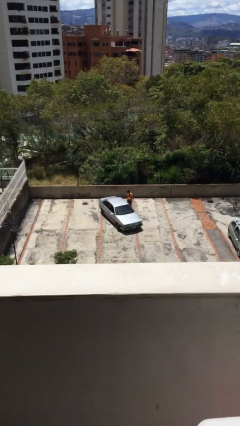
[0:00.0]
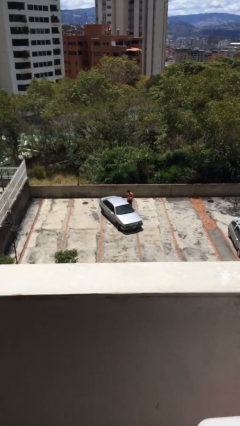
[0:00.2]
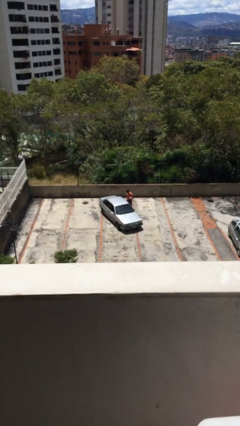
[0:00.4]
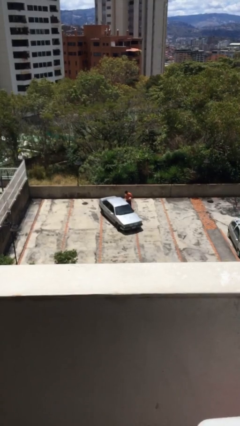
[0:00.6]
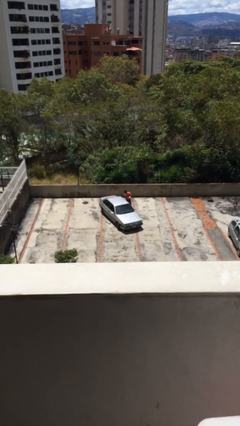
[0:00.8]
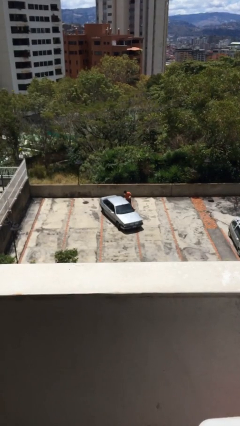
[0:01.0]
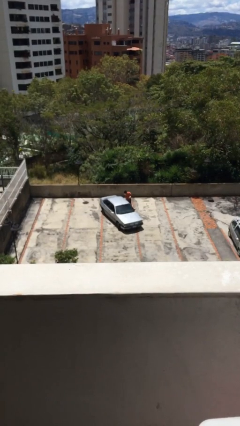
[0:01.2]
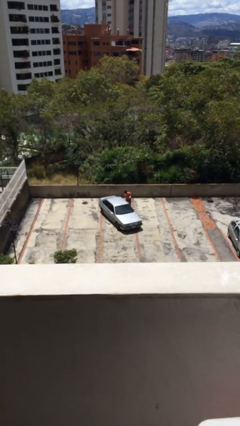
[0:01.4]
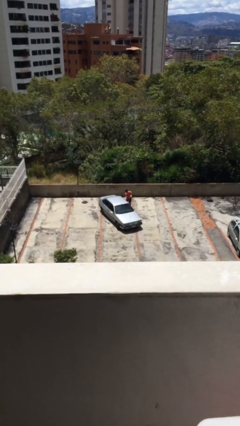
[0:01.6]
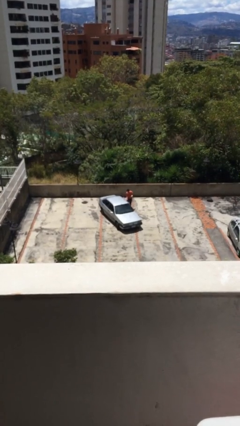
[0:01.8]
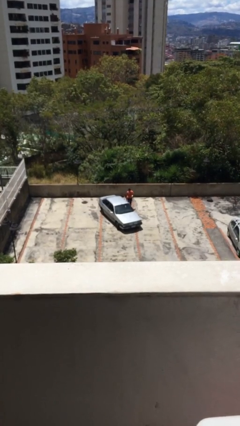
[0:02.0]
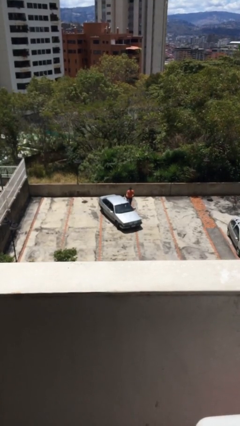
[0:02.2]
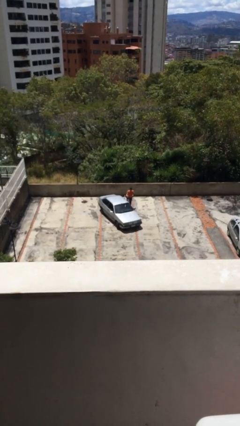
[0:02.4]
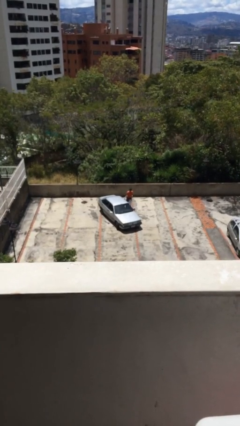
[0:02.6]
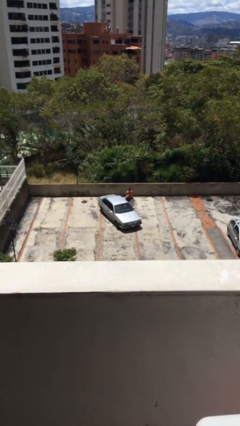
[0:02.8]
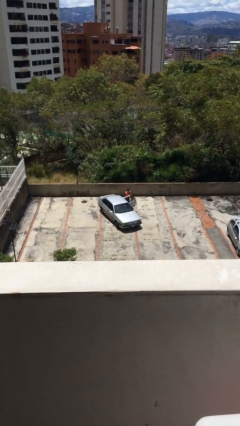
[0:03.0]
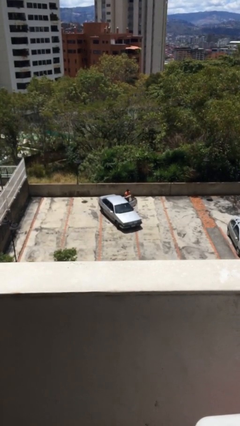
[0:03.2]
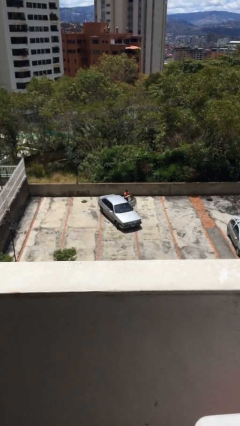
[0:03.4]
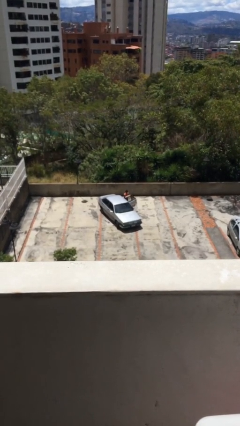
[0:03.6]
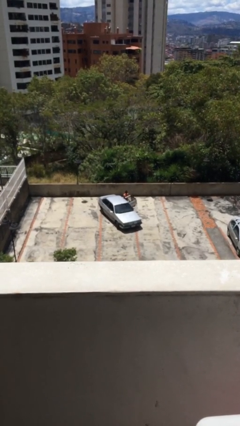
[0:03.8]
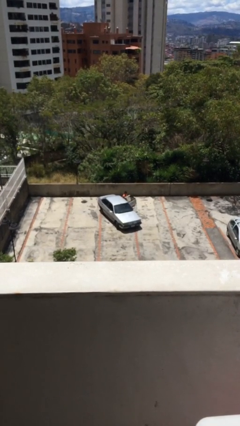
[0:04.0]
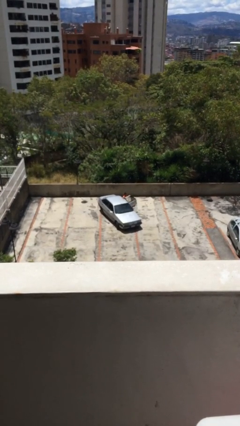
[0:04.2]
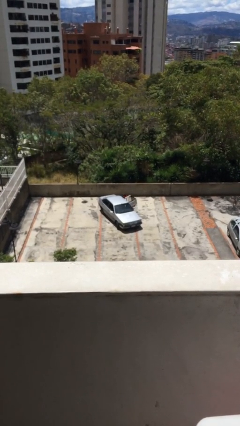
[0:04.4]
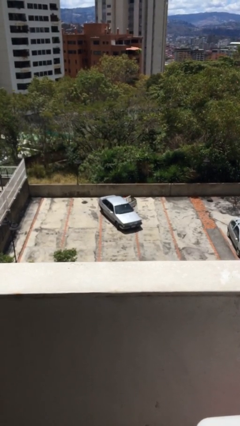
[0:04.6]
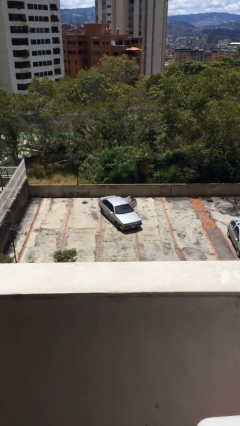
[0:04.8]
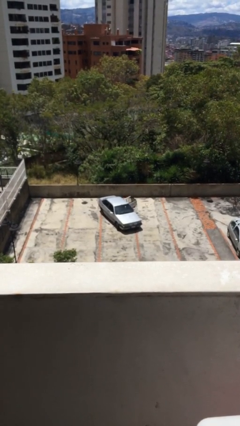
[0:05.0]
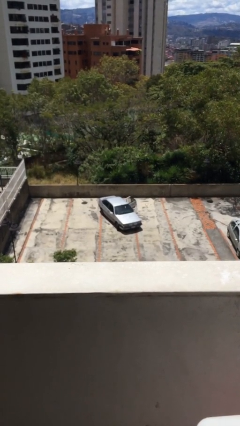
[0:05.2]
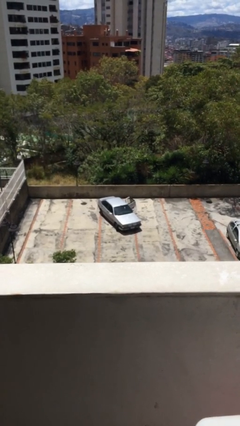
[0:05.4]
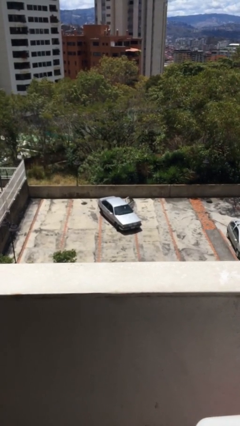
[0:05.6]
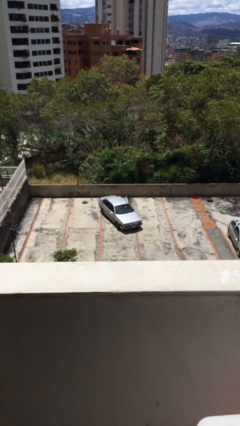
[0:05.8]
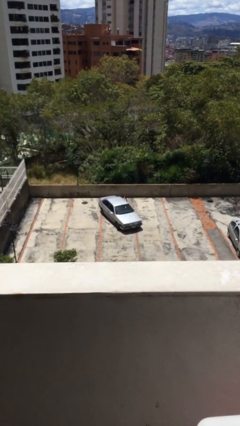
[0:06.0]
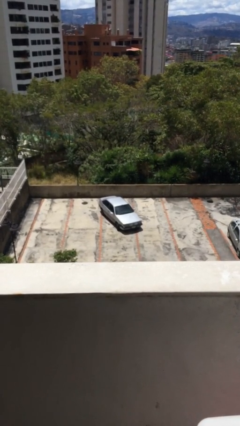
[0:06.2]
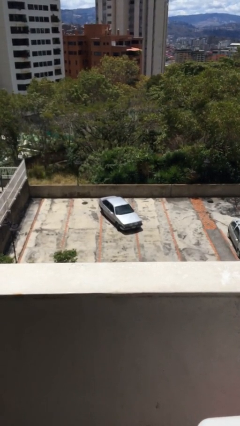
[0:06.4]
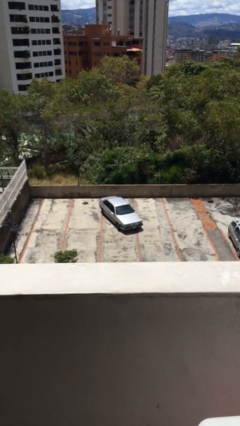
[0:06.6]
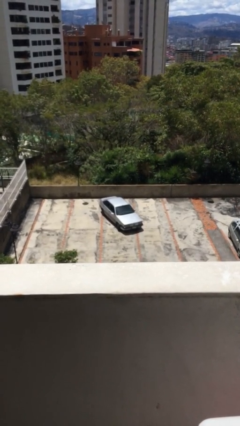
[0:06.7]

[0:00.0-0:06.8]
car picks up person

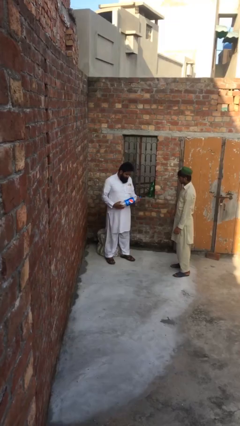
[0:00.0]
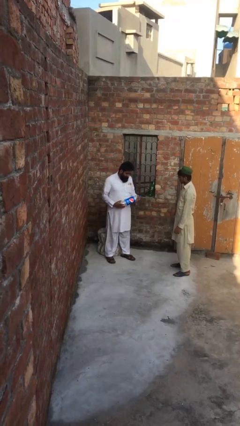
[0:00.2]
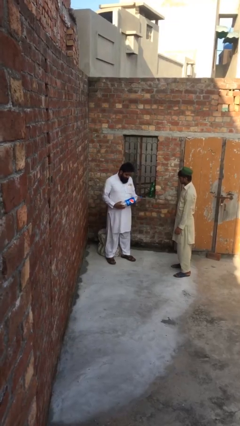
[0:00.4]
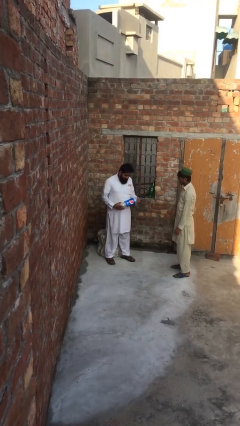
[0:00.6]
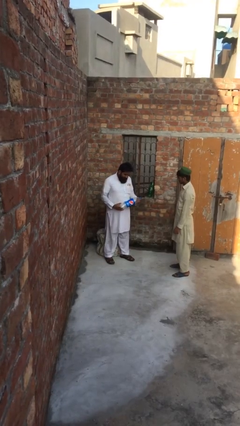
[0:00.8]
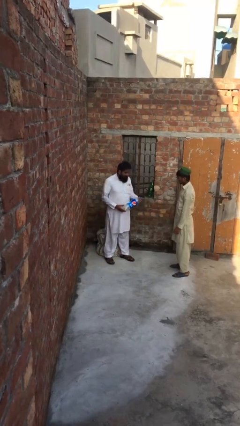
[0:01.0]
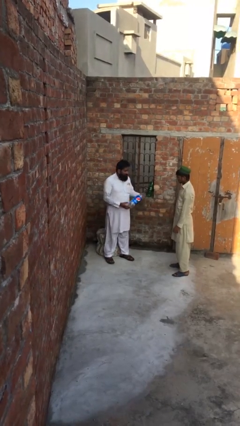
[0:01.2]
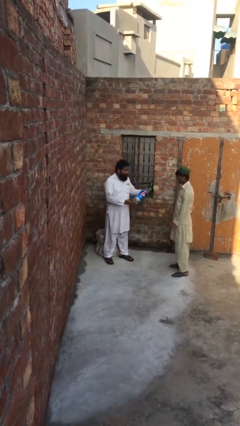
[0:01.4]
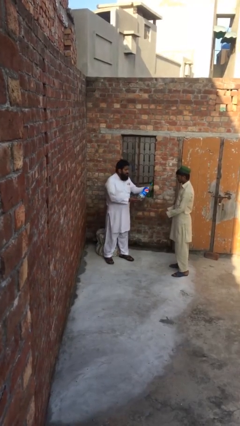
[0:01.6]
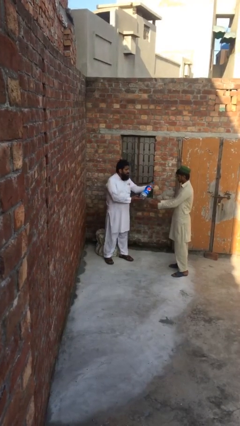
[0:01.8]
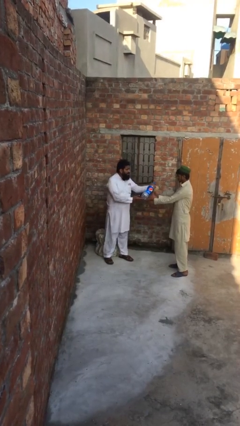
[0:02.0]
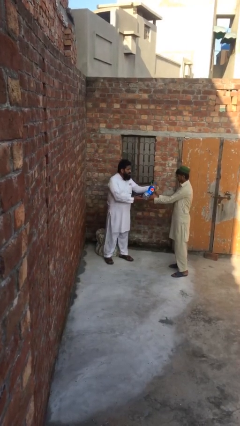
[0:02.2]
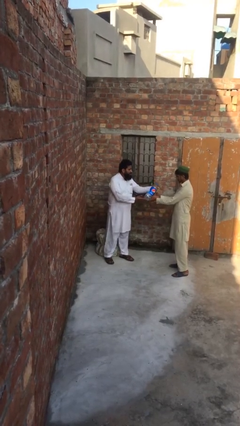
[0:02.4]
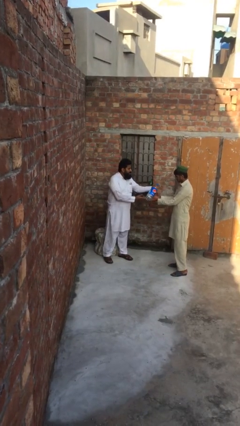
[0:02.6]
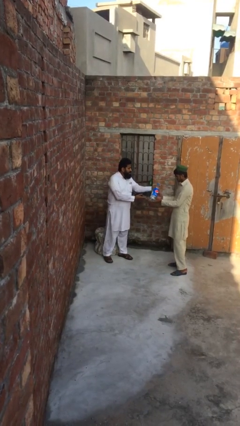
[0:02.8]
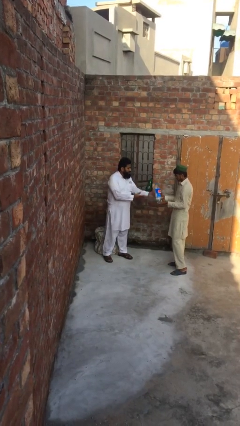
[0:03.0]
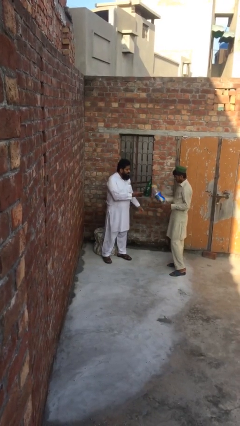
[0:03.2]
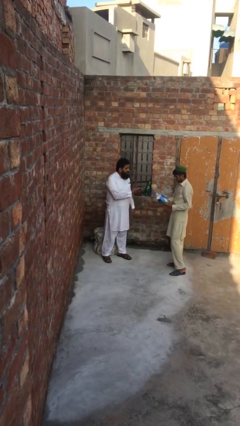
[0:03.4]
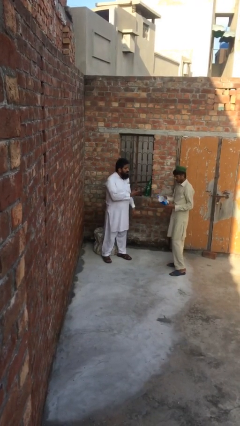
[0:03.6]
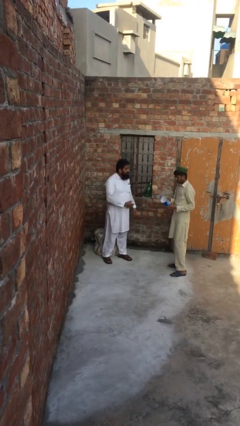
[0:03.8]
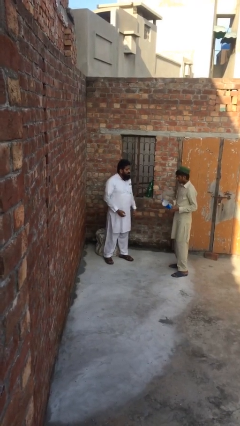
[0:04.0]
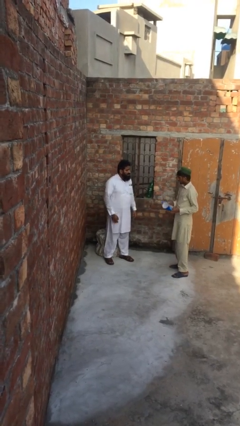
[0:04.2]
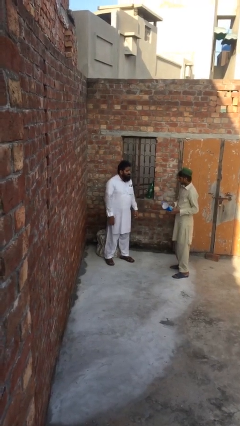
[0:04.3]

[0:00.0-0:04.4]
person transfers object to person

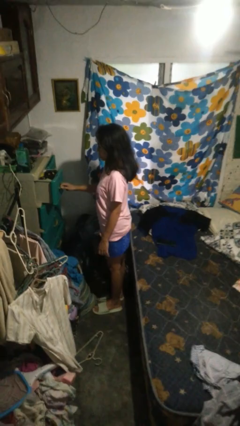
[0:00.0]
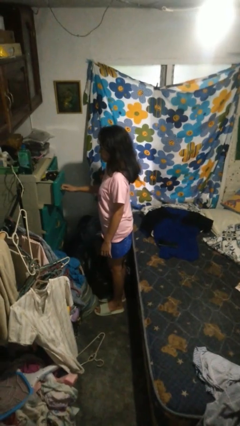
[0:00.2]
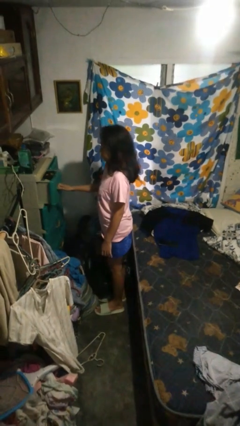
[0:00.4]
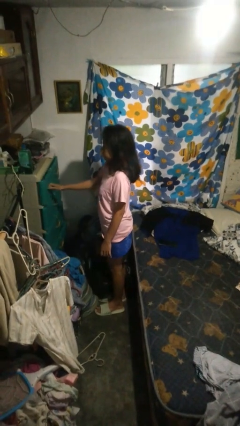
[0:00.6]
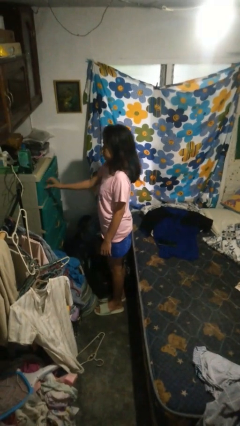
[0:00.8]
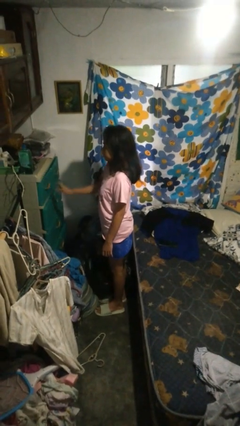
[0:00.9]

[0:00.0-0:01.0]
person closes dresser drawer

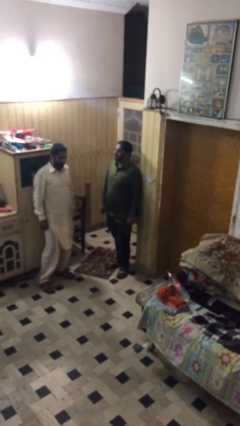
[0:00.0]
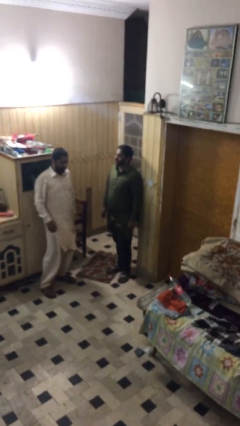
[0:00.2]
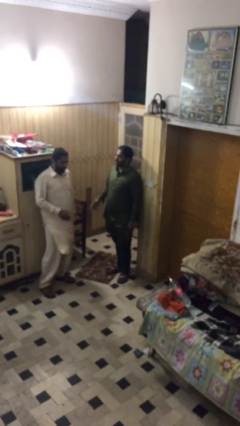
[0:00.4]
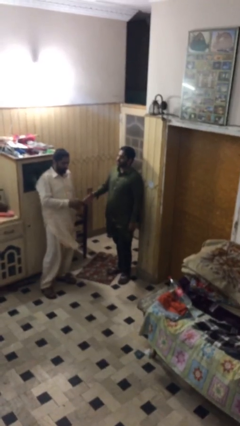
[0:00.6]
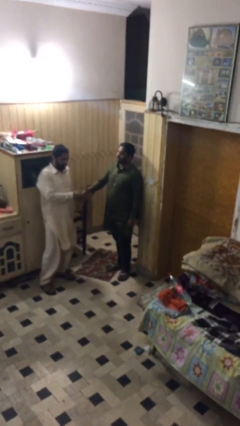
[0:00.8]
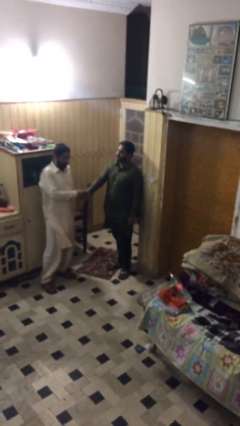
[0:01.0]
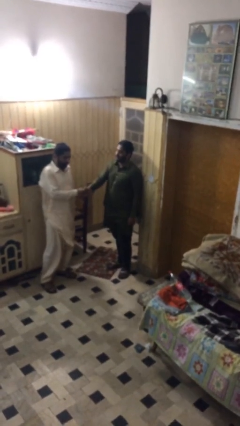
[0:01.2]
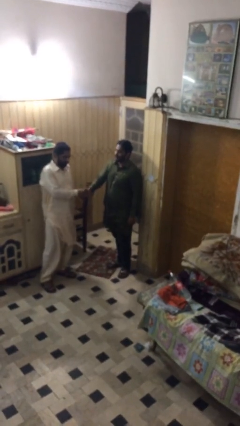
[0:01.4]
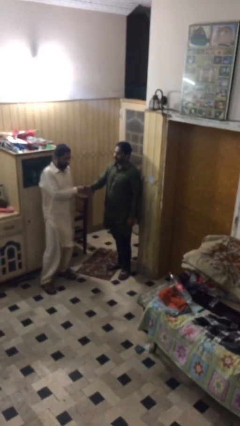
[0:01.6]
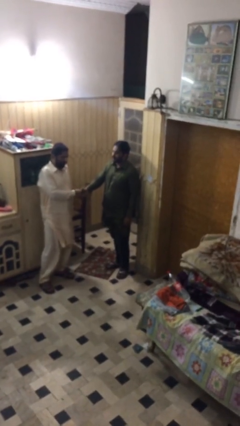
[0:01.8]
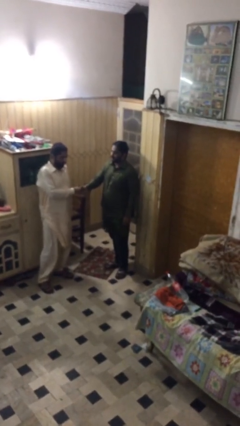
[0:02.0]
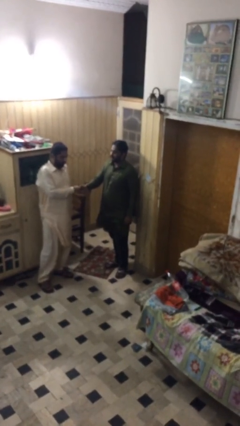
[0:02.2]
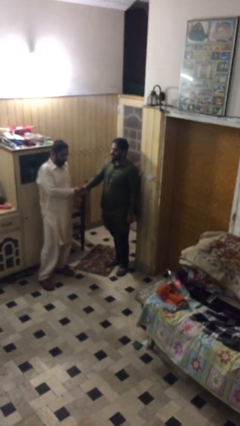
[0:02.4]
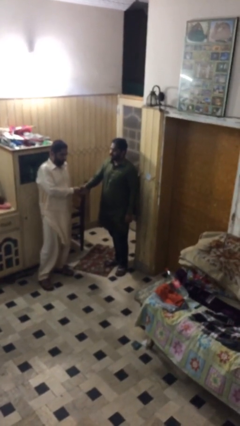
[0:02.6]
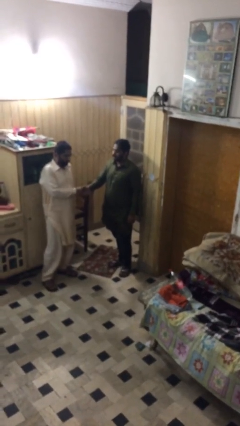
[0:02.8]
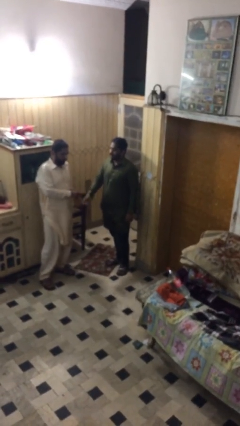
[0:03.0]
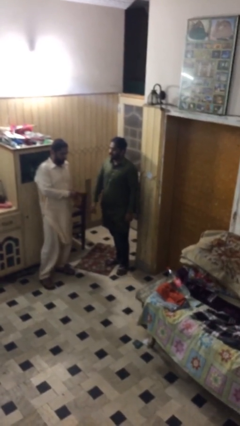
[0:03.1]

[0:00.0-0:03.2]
person shakes hand

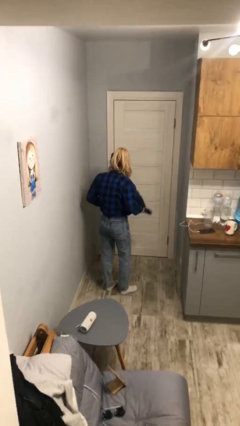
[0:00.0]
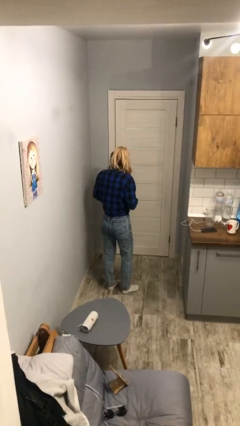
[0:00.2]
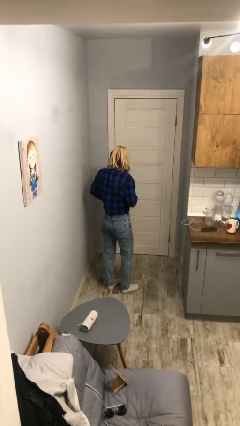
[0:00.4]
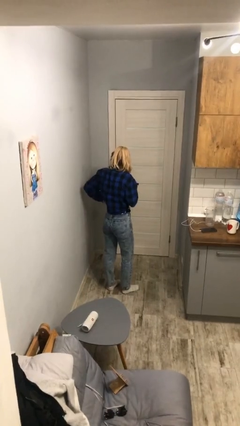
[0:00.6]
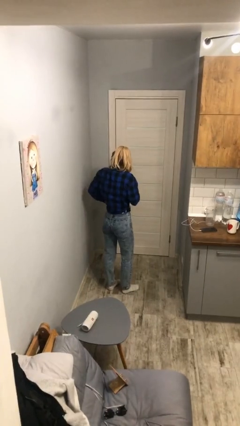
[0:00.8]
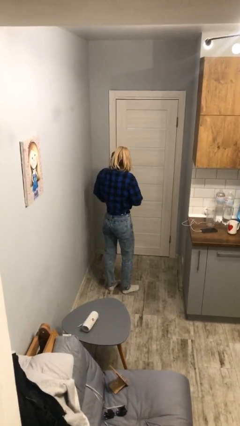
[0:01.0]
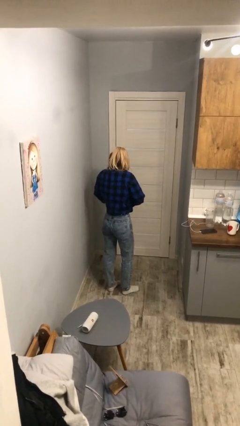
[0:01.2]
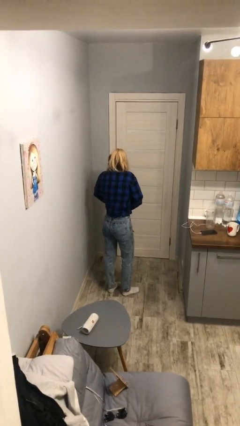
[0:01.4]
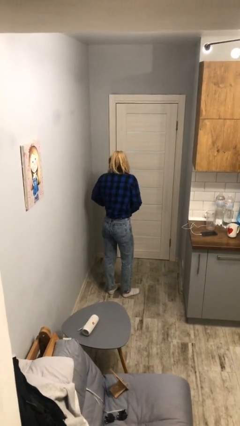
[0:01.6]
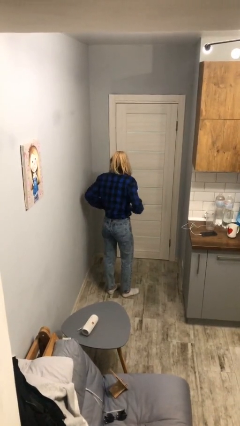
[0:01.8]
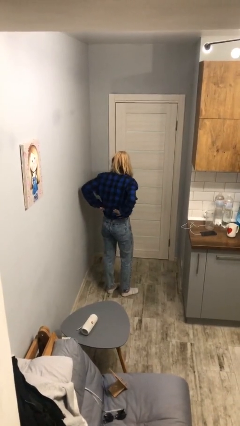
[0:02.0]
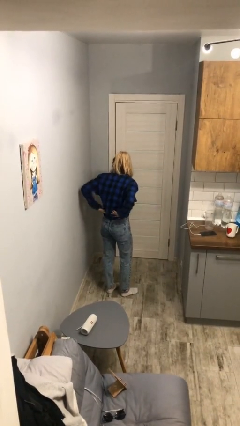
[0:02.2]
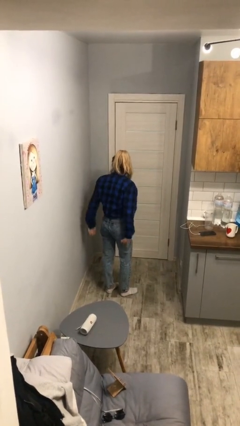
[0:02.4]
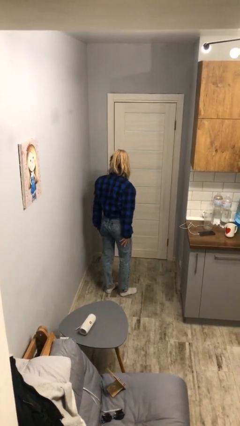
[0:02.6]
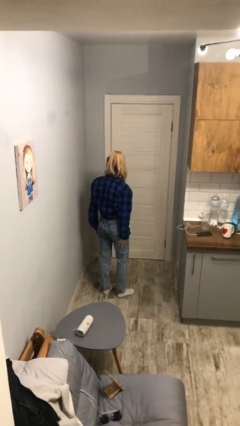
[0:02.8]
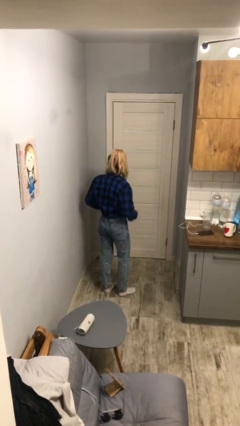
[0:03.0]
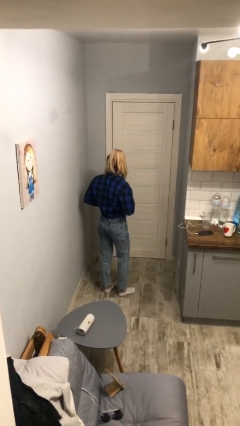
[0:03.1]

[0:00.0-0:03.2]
person tucks in shirt
